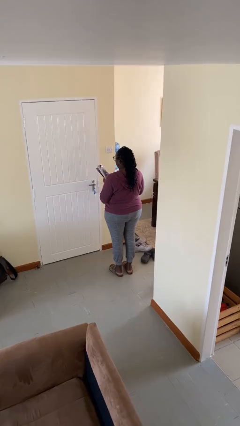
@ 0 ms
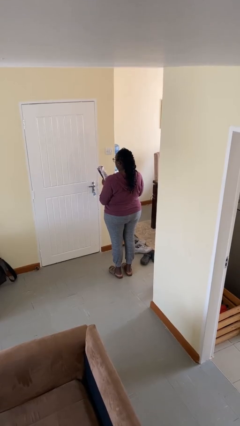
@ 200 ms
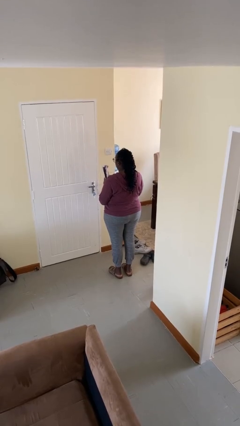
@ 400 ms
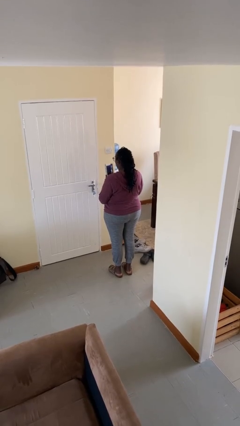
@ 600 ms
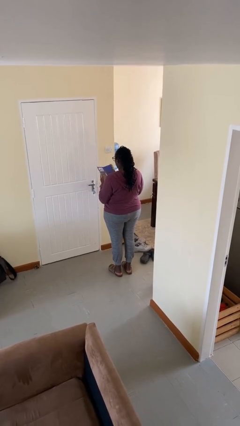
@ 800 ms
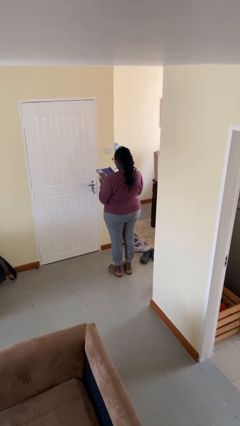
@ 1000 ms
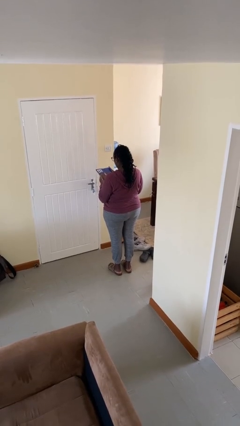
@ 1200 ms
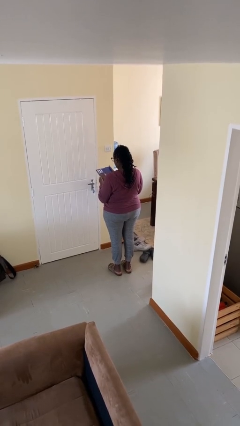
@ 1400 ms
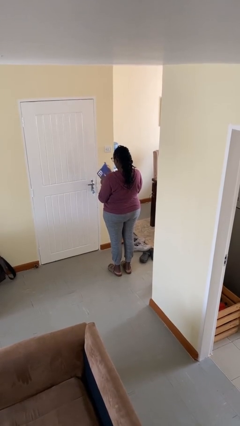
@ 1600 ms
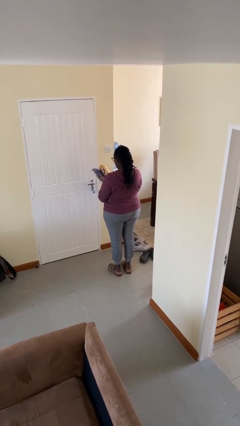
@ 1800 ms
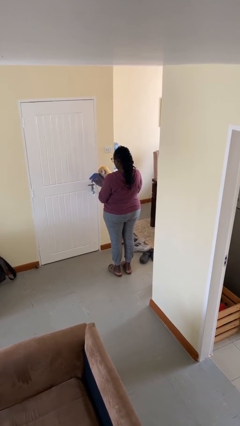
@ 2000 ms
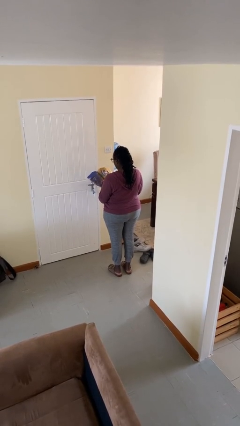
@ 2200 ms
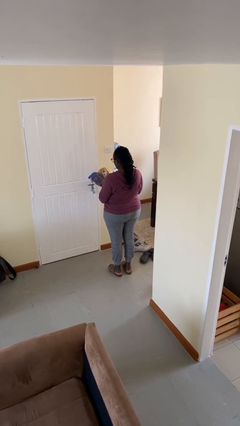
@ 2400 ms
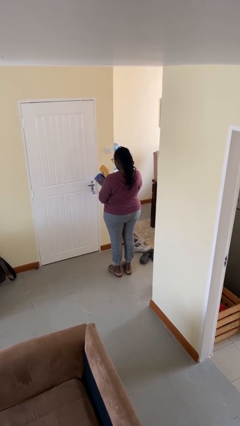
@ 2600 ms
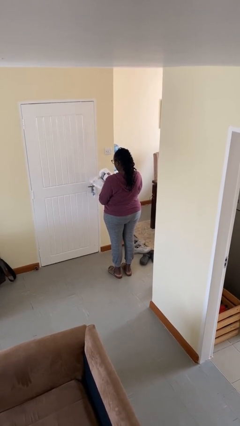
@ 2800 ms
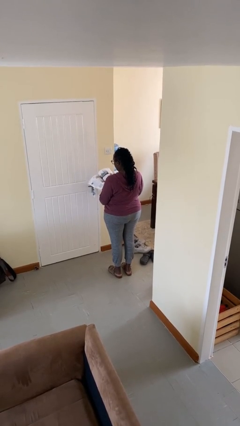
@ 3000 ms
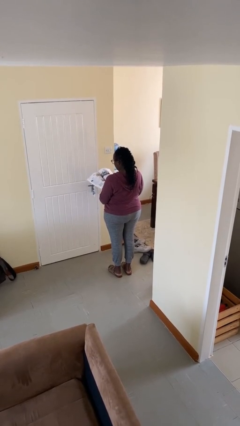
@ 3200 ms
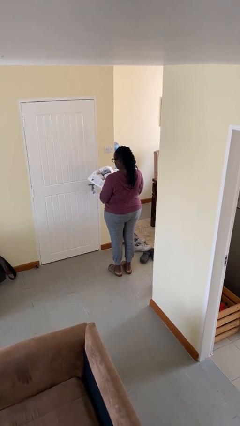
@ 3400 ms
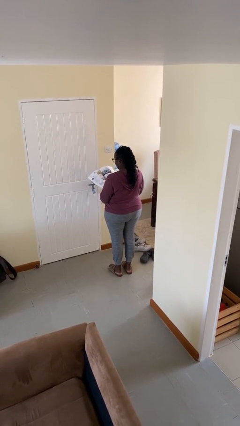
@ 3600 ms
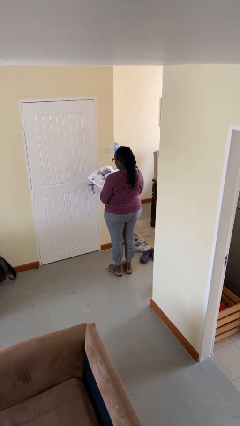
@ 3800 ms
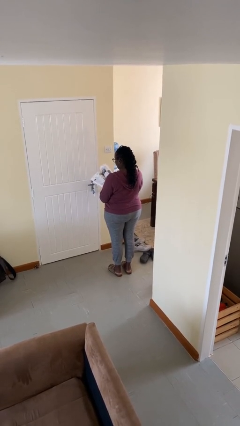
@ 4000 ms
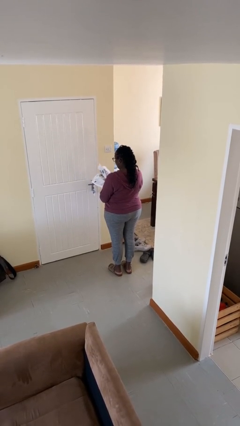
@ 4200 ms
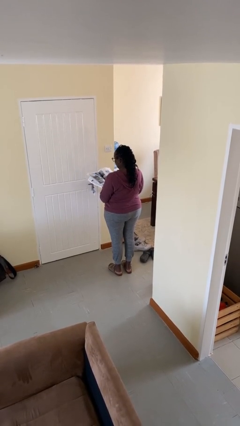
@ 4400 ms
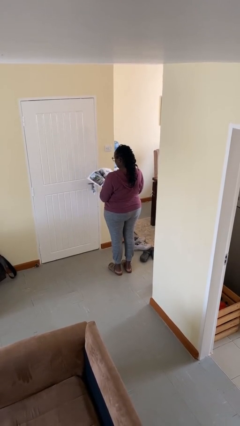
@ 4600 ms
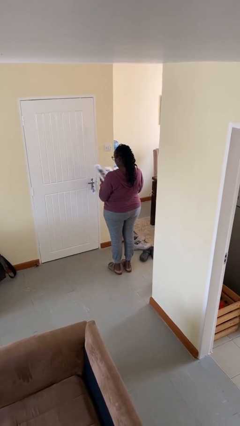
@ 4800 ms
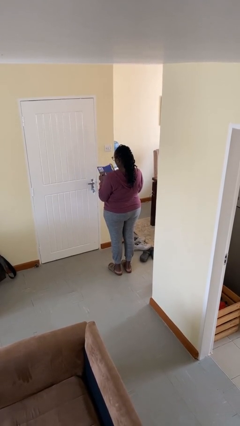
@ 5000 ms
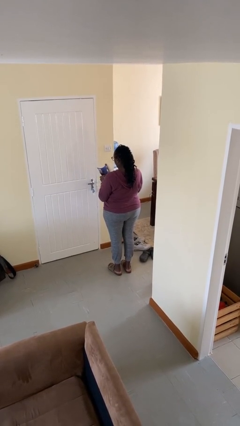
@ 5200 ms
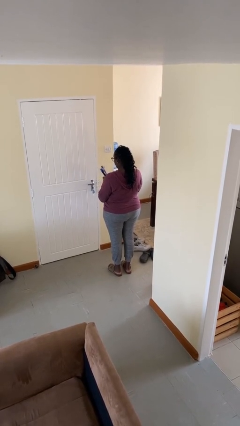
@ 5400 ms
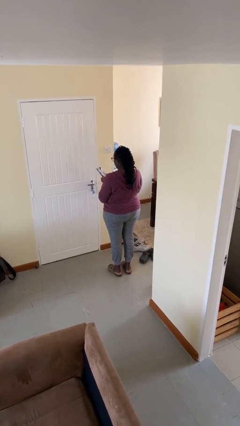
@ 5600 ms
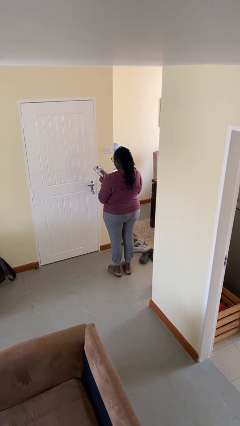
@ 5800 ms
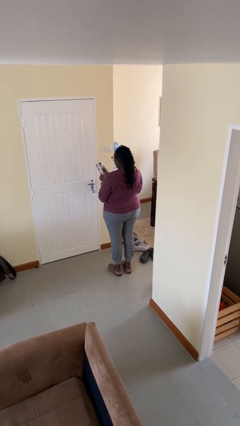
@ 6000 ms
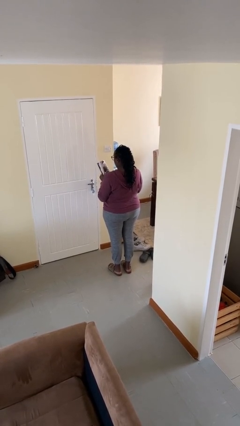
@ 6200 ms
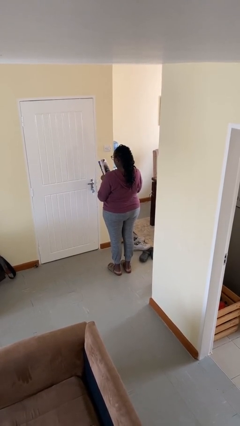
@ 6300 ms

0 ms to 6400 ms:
person reads magazine

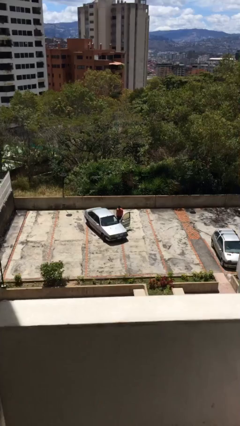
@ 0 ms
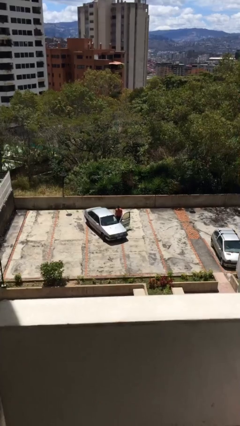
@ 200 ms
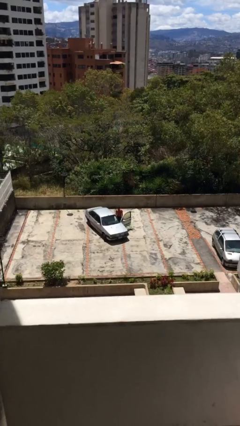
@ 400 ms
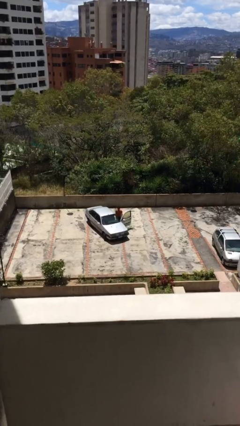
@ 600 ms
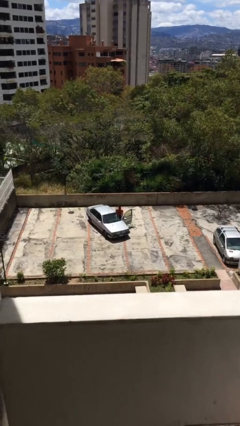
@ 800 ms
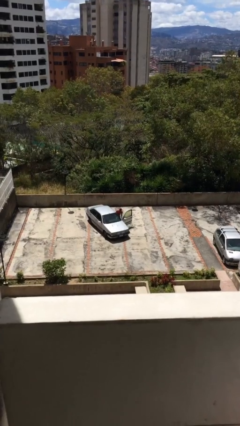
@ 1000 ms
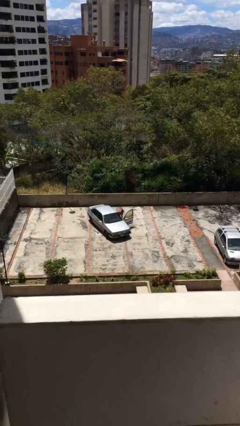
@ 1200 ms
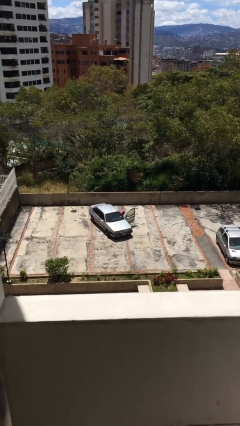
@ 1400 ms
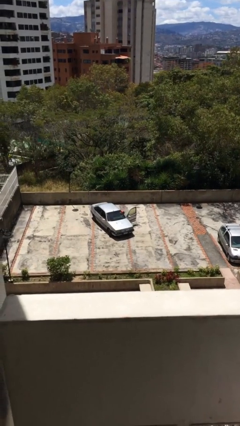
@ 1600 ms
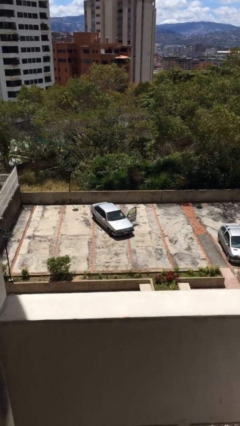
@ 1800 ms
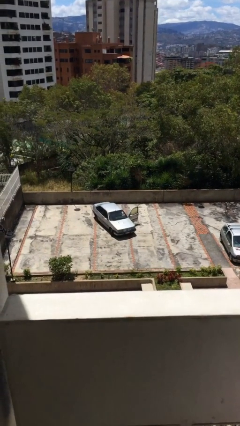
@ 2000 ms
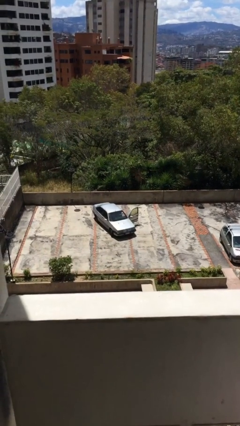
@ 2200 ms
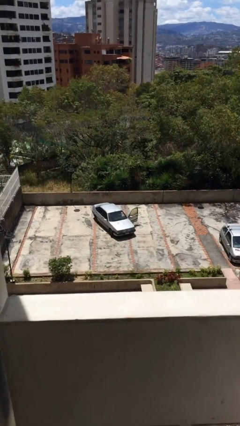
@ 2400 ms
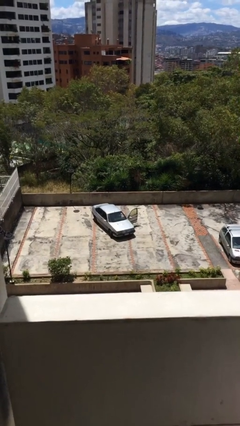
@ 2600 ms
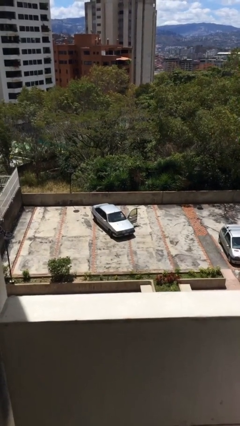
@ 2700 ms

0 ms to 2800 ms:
person enters car

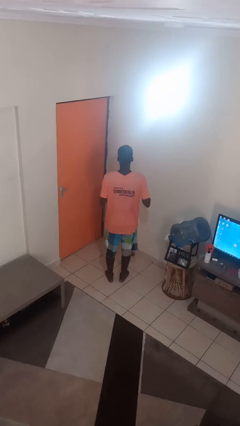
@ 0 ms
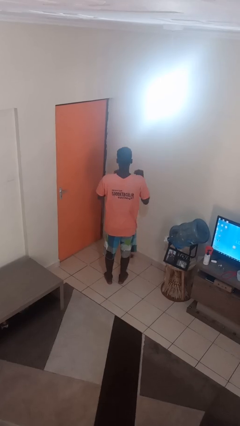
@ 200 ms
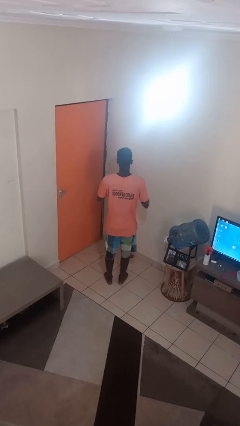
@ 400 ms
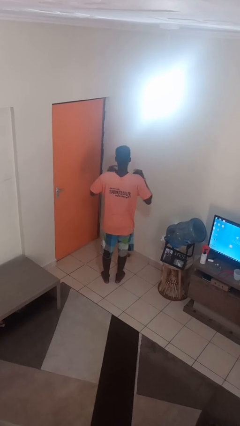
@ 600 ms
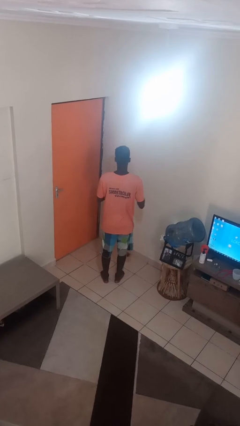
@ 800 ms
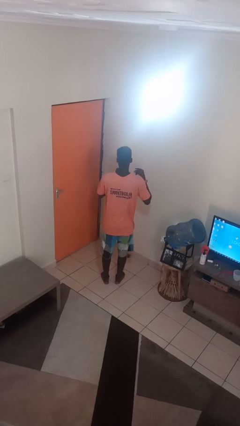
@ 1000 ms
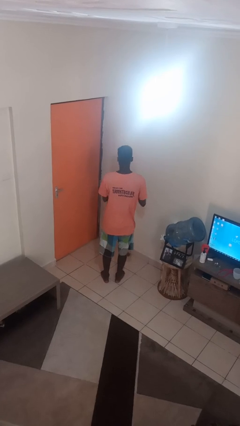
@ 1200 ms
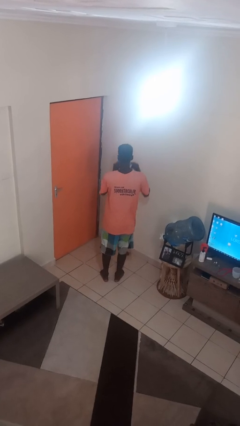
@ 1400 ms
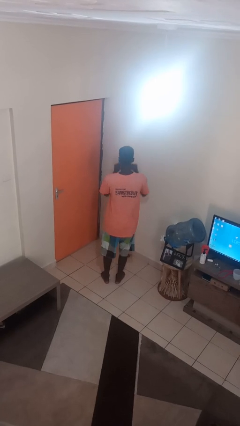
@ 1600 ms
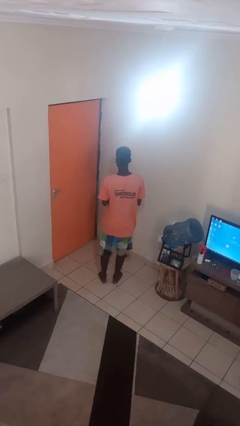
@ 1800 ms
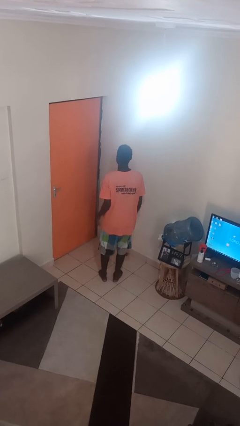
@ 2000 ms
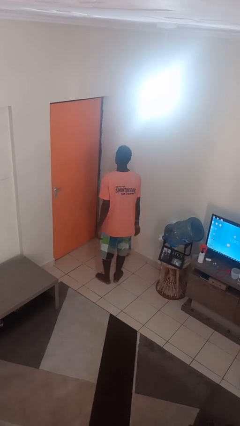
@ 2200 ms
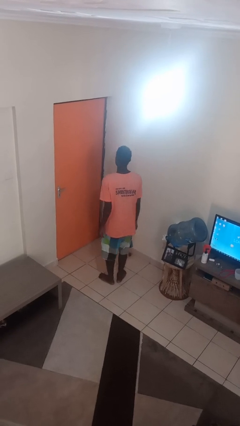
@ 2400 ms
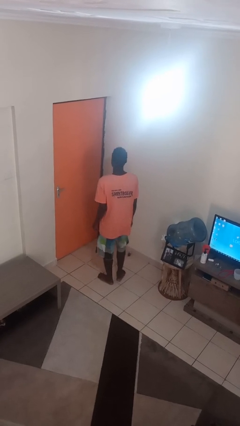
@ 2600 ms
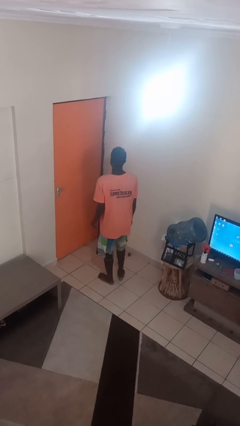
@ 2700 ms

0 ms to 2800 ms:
person snaps fingers

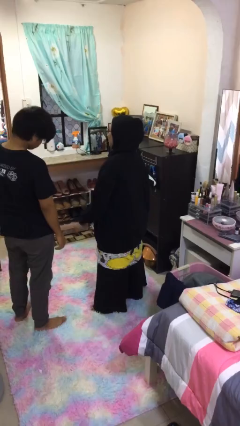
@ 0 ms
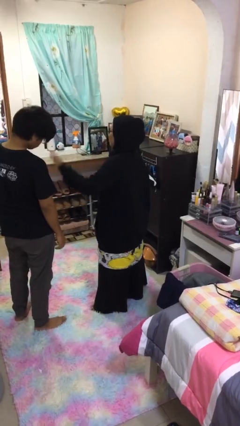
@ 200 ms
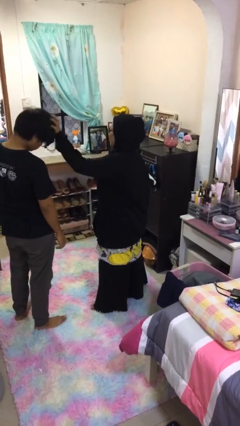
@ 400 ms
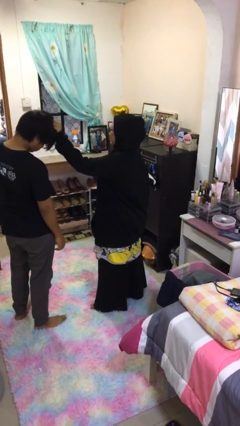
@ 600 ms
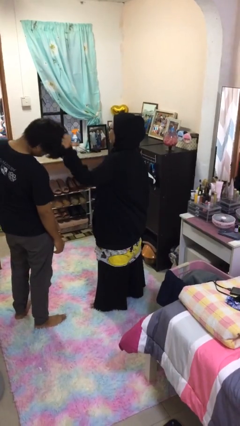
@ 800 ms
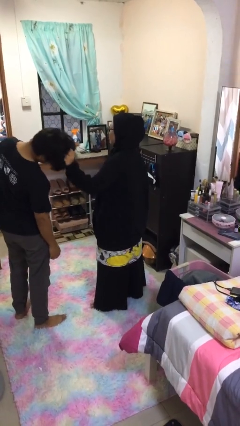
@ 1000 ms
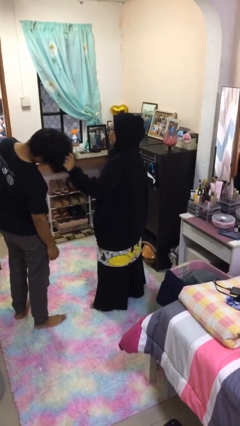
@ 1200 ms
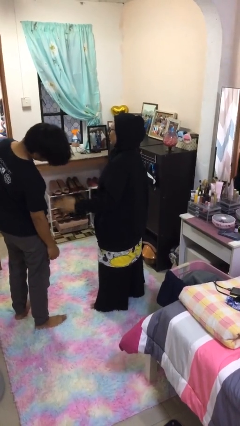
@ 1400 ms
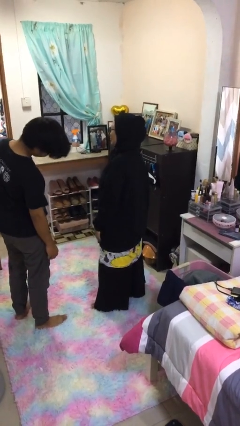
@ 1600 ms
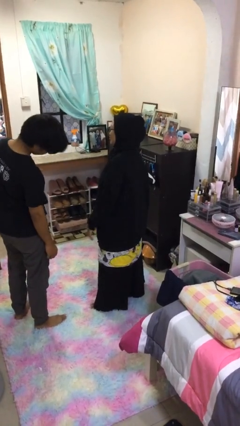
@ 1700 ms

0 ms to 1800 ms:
person grabs person by hair

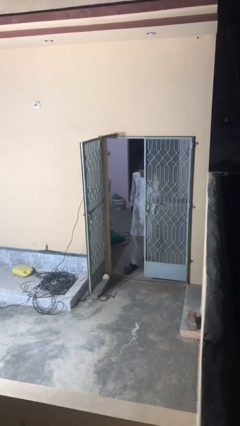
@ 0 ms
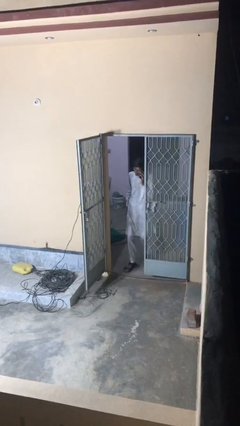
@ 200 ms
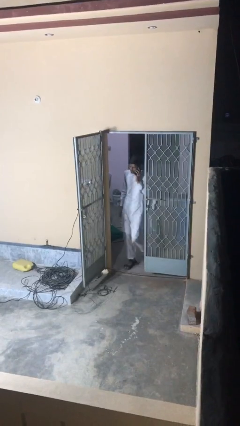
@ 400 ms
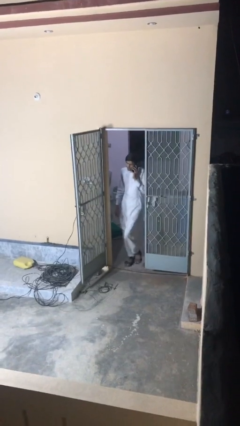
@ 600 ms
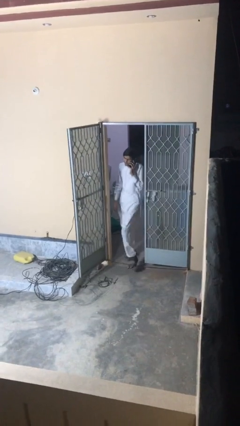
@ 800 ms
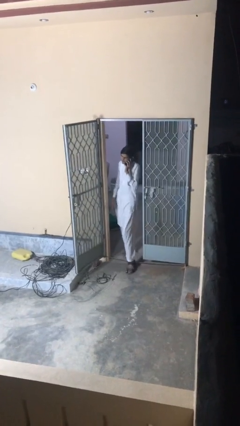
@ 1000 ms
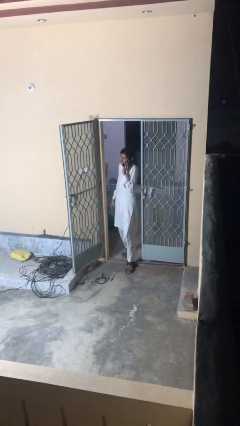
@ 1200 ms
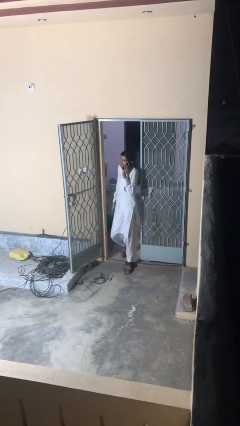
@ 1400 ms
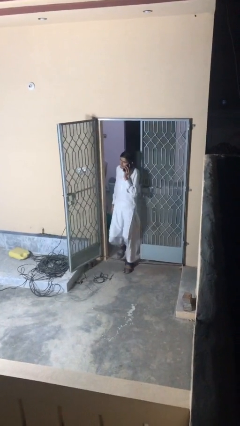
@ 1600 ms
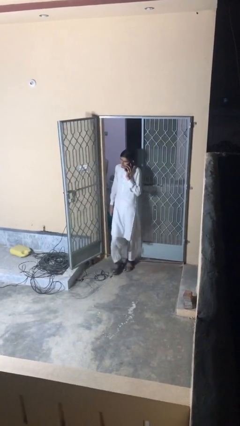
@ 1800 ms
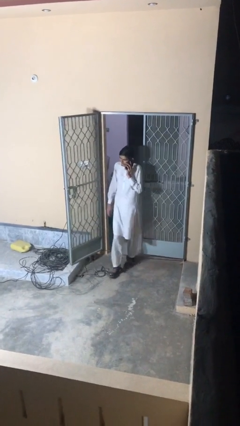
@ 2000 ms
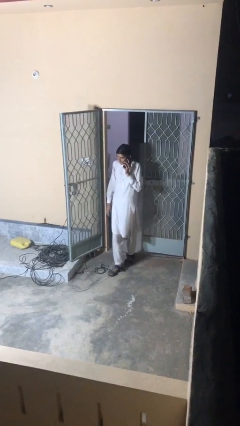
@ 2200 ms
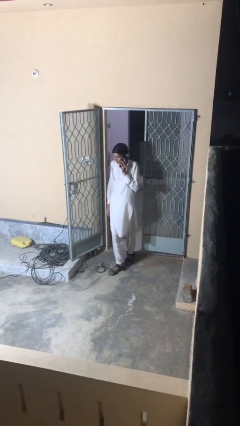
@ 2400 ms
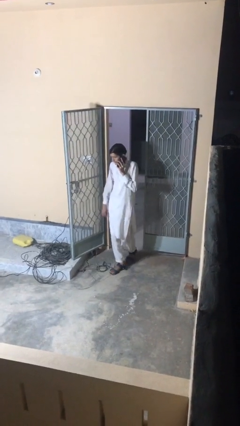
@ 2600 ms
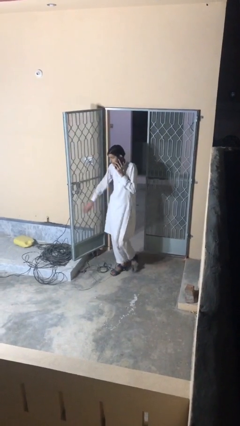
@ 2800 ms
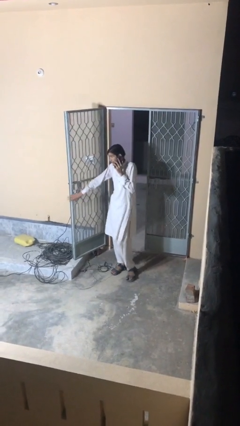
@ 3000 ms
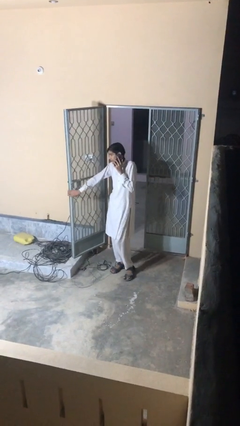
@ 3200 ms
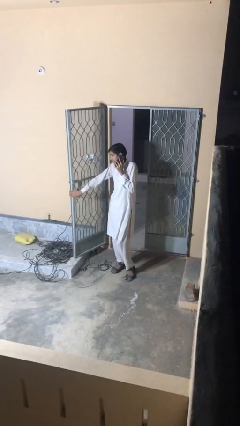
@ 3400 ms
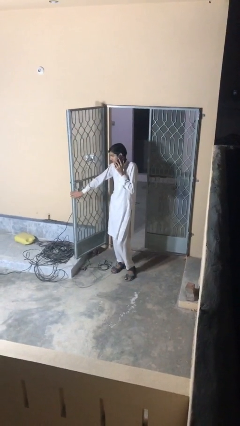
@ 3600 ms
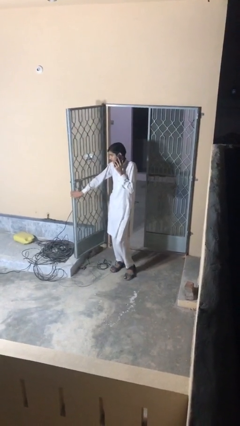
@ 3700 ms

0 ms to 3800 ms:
person enters scene through structure
